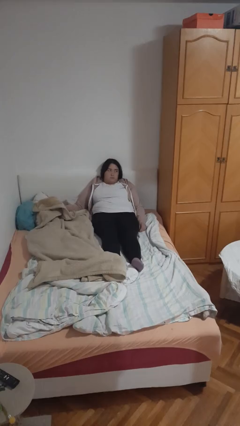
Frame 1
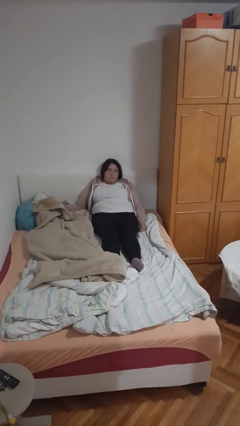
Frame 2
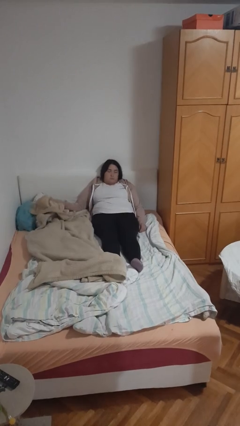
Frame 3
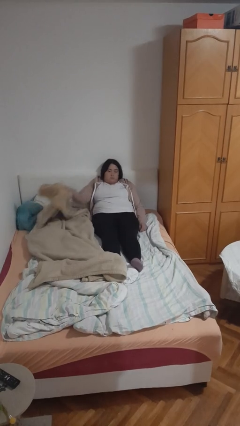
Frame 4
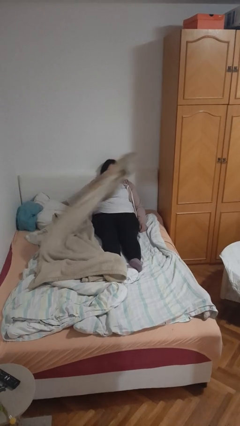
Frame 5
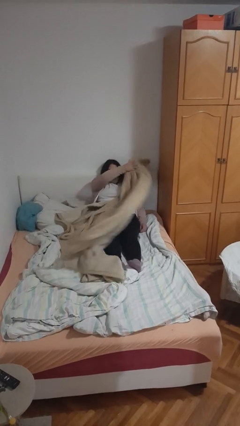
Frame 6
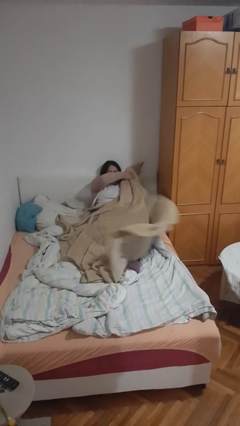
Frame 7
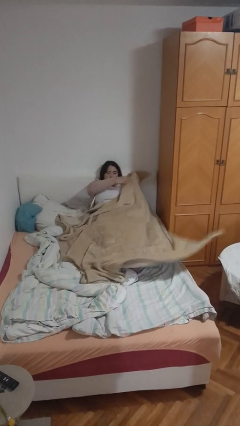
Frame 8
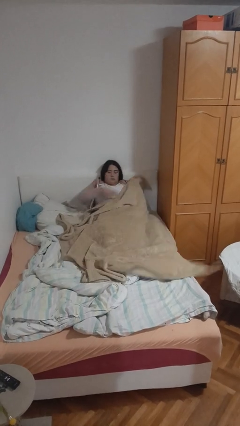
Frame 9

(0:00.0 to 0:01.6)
person covers with blanket

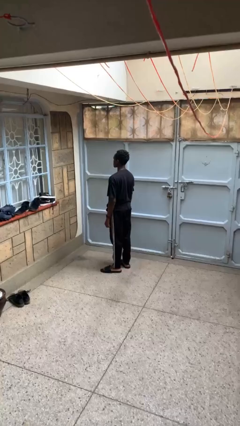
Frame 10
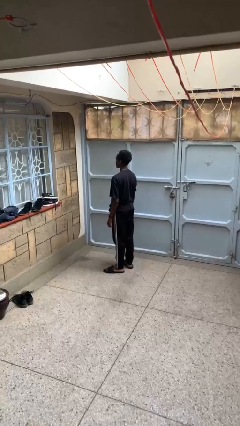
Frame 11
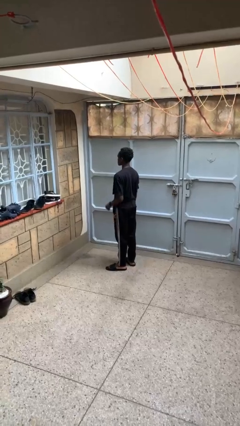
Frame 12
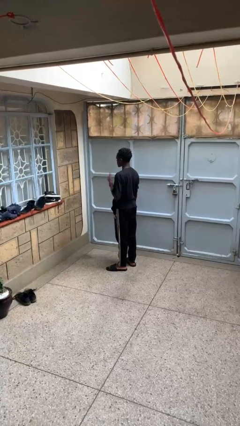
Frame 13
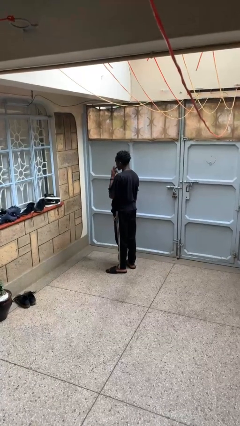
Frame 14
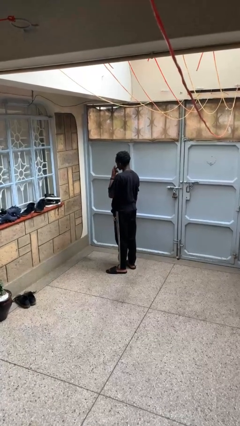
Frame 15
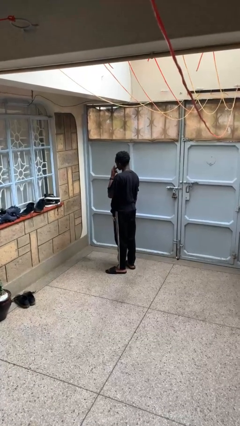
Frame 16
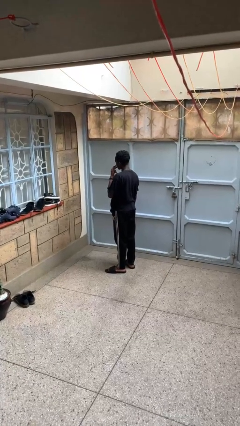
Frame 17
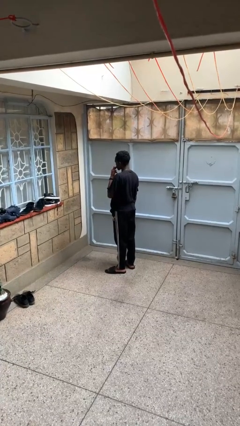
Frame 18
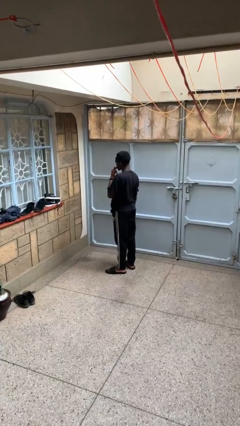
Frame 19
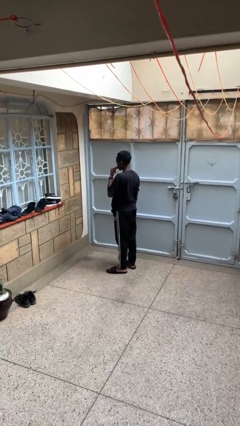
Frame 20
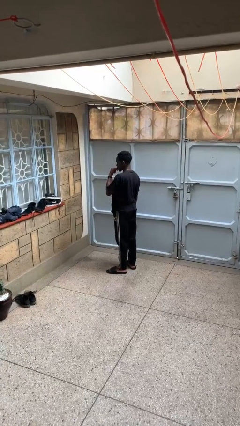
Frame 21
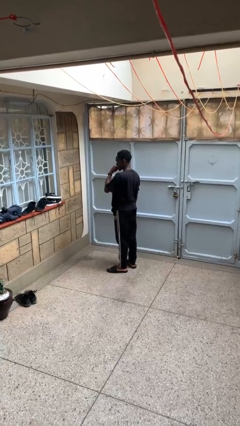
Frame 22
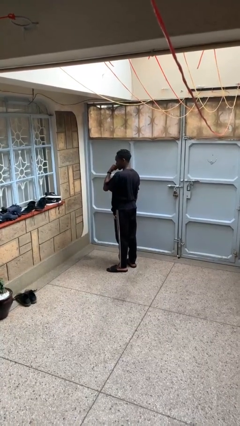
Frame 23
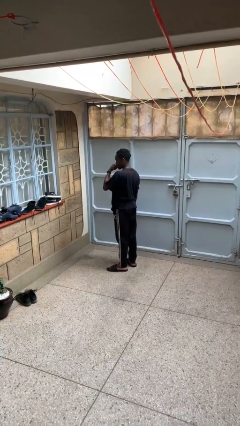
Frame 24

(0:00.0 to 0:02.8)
person licks fingers

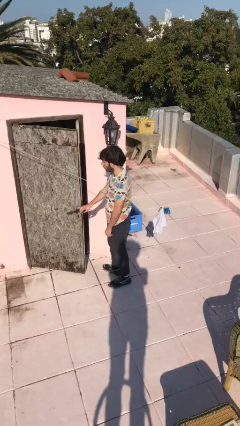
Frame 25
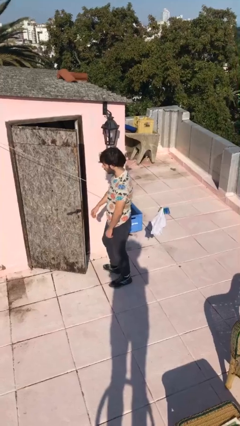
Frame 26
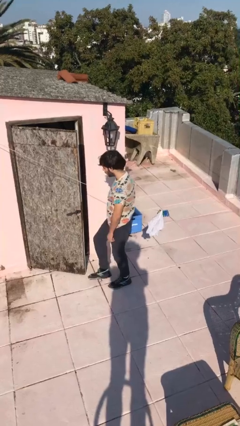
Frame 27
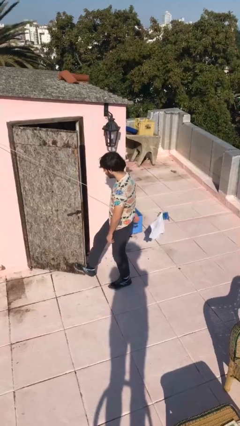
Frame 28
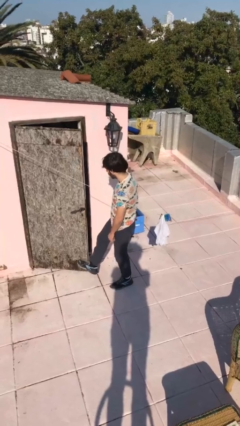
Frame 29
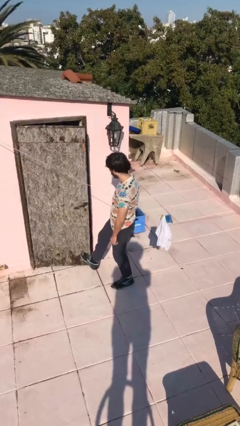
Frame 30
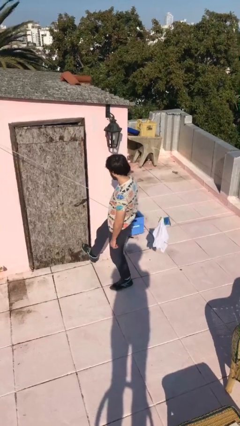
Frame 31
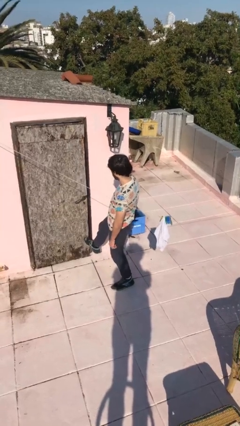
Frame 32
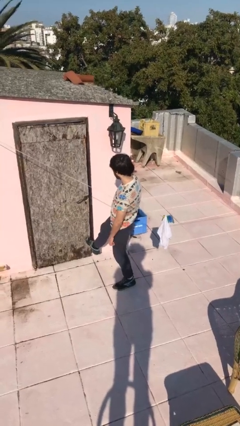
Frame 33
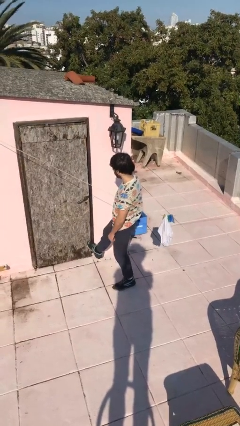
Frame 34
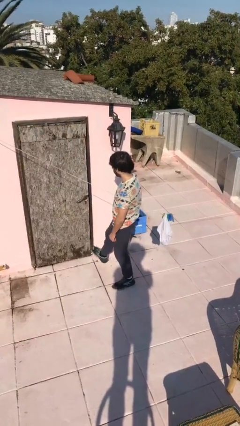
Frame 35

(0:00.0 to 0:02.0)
person closes door with foot

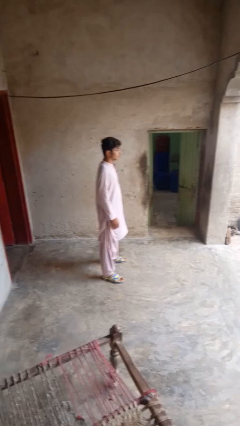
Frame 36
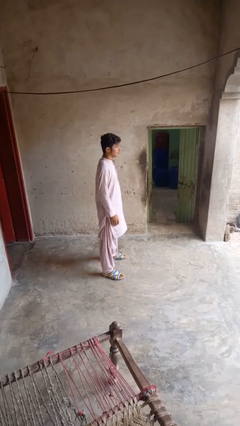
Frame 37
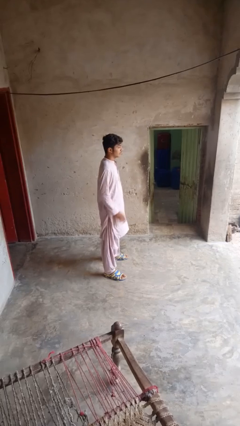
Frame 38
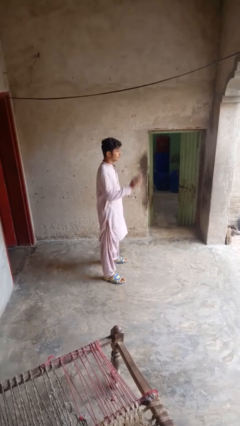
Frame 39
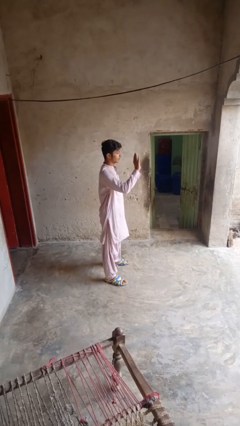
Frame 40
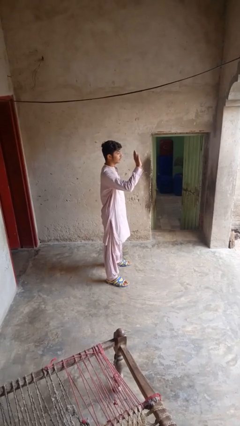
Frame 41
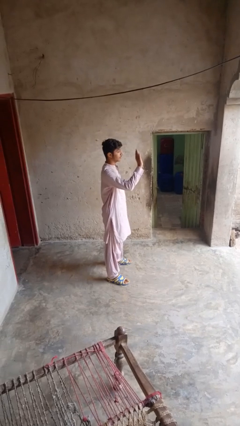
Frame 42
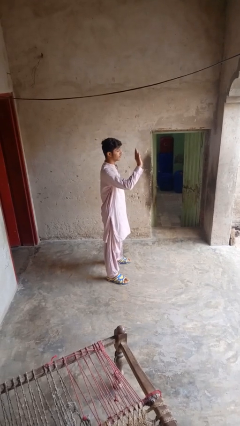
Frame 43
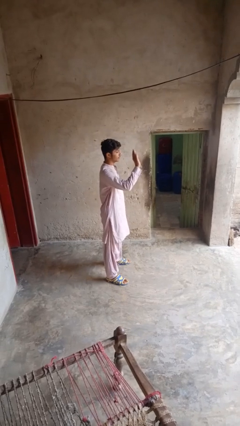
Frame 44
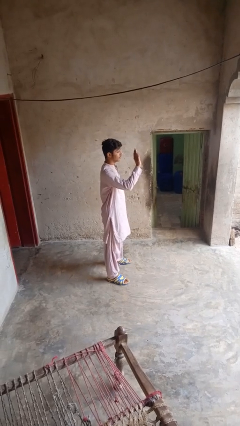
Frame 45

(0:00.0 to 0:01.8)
person waves at person

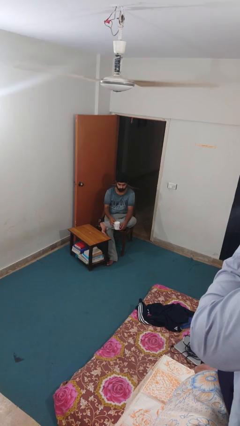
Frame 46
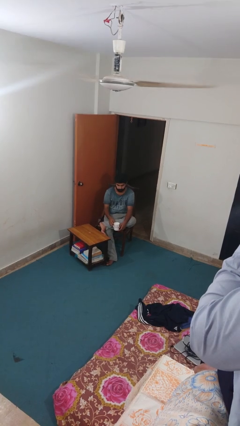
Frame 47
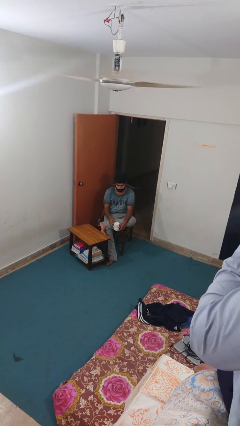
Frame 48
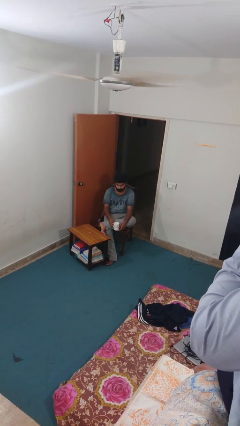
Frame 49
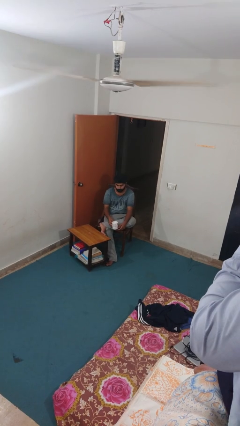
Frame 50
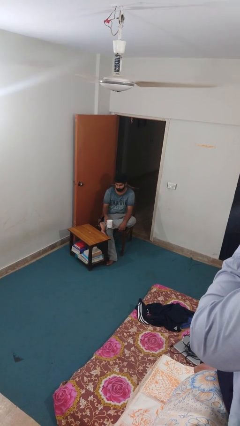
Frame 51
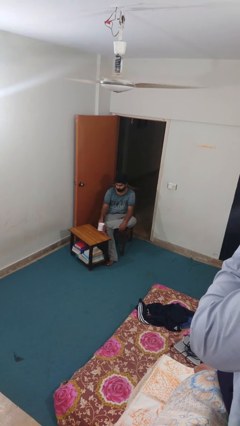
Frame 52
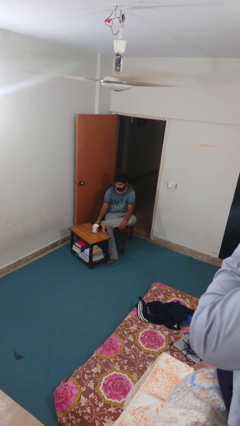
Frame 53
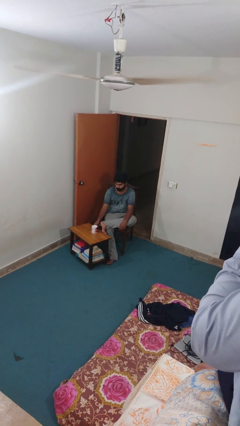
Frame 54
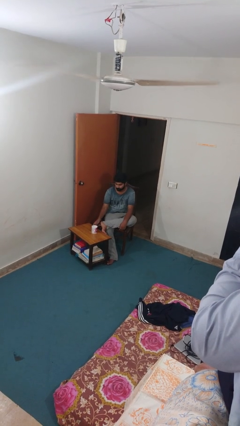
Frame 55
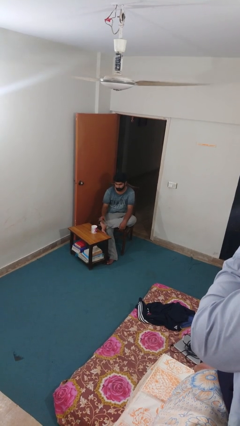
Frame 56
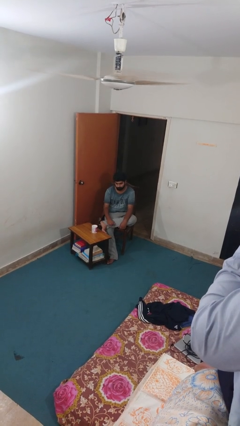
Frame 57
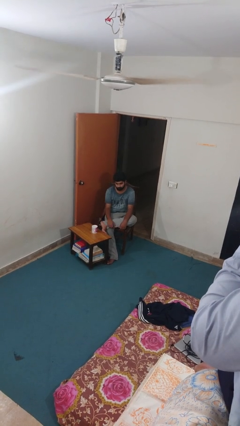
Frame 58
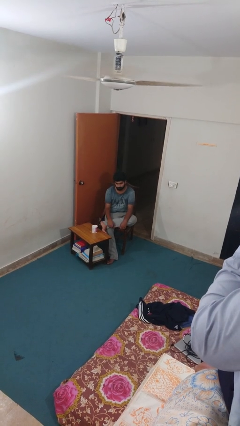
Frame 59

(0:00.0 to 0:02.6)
person puts down object on table

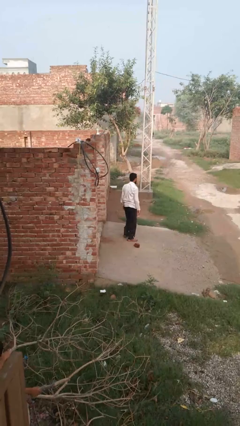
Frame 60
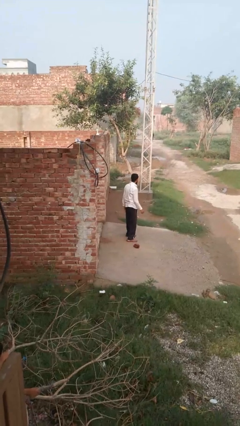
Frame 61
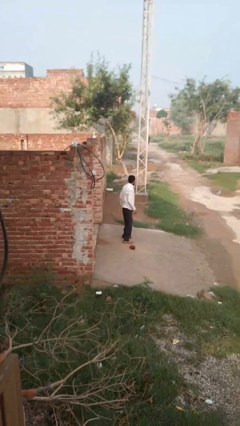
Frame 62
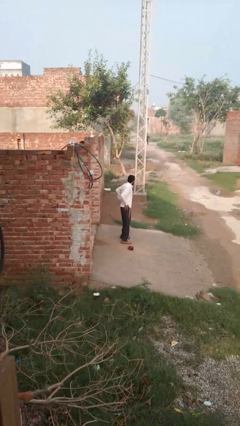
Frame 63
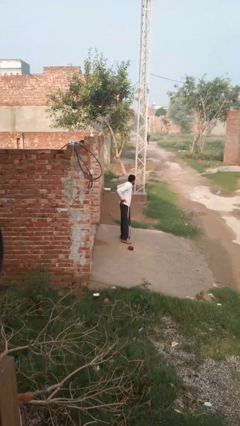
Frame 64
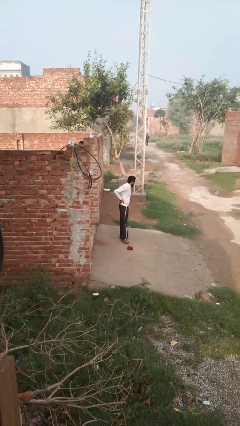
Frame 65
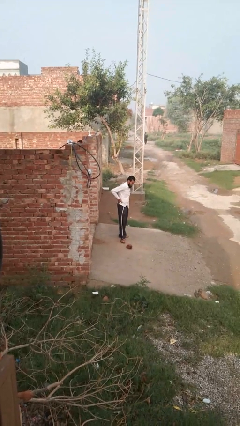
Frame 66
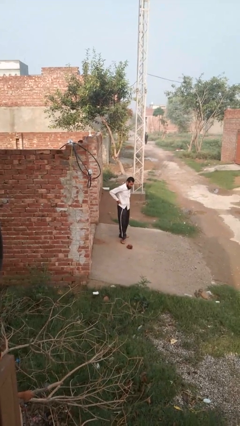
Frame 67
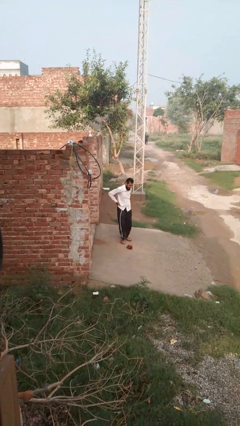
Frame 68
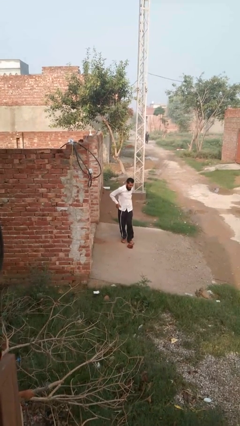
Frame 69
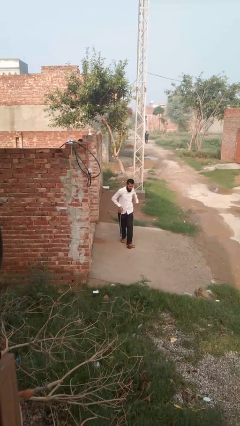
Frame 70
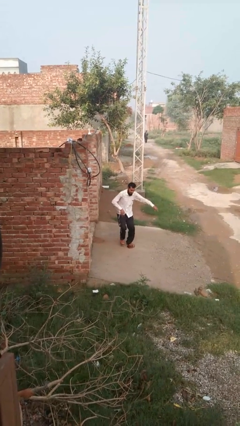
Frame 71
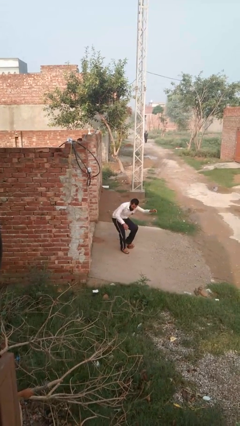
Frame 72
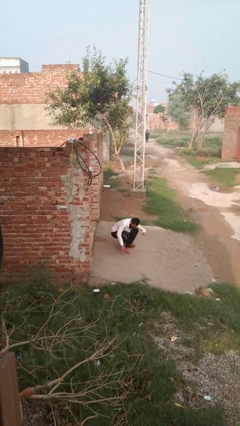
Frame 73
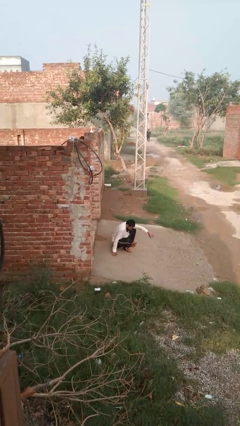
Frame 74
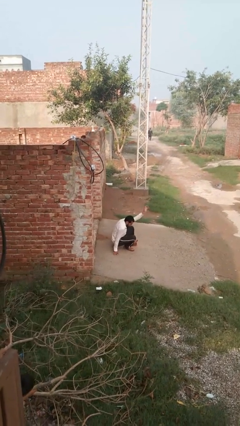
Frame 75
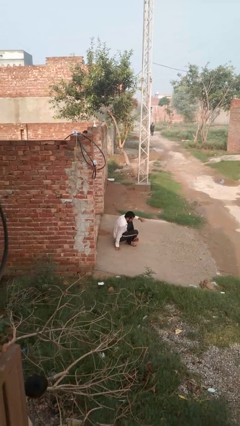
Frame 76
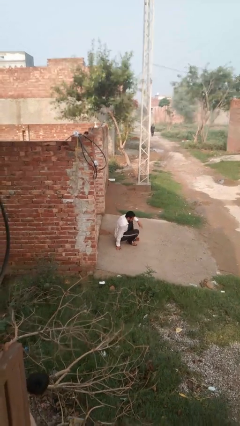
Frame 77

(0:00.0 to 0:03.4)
person trips on object on floor

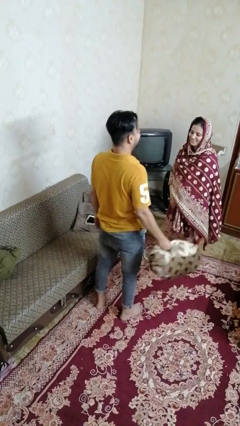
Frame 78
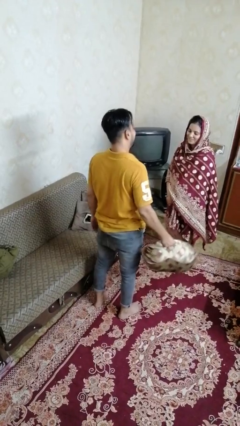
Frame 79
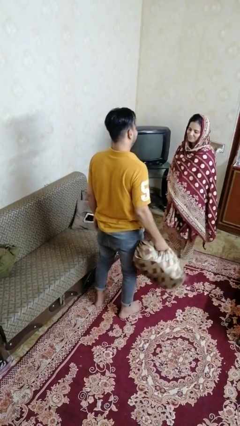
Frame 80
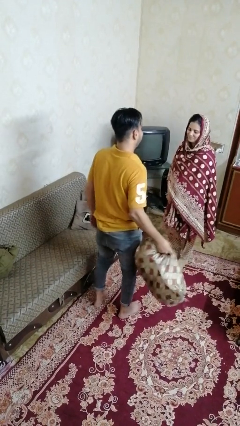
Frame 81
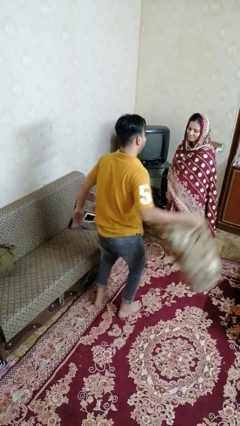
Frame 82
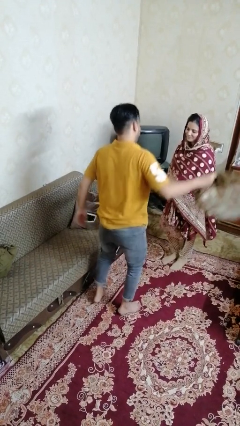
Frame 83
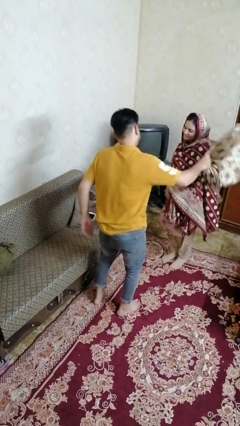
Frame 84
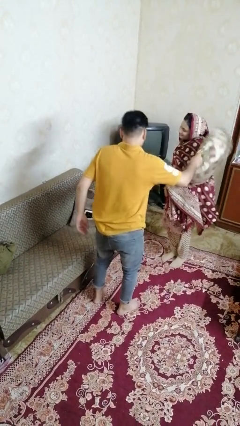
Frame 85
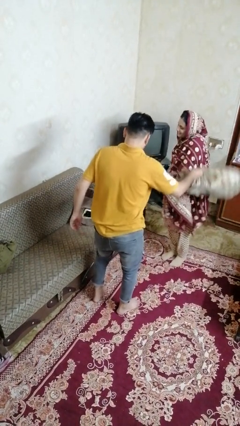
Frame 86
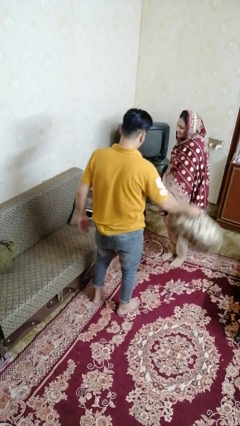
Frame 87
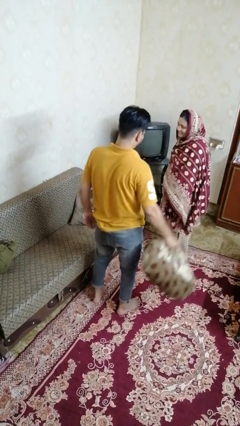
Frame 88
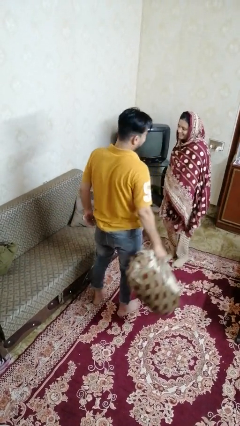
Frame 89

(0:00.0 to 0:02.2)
person hits person with pillow

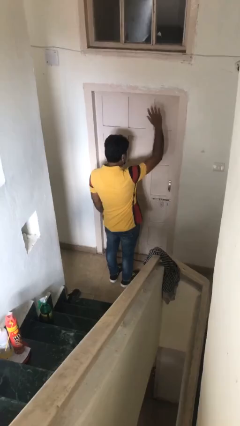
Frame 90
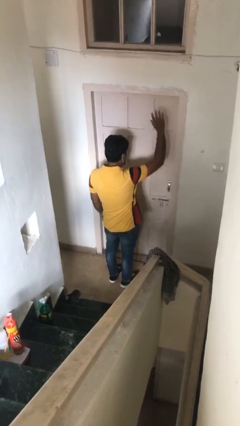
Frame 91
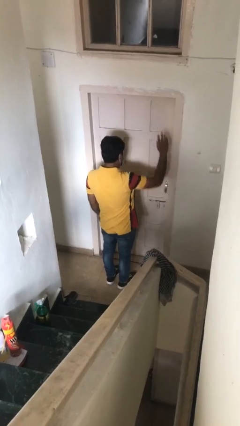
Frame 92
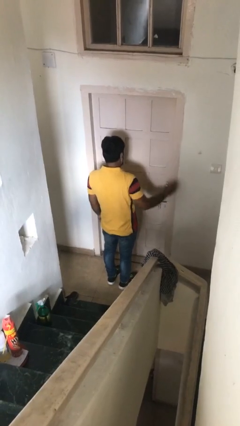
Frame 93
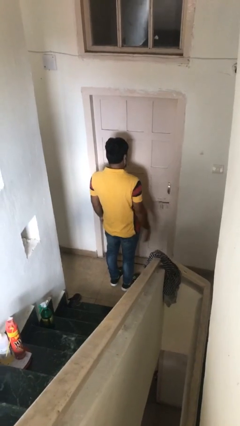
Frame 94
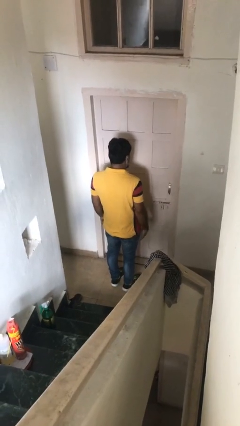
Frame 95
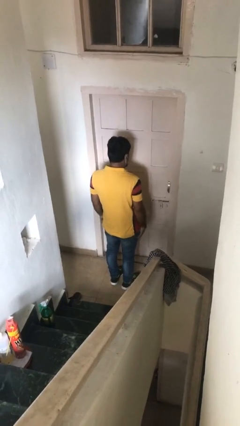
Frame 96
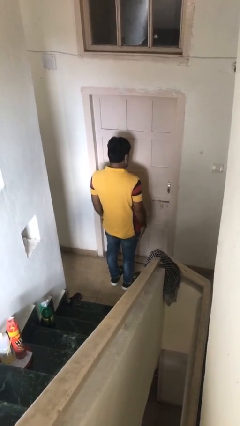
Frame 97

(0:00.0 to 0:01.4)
person gestures lower hand
